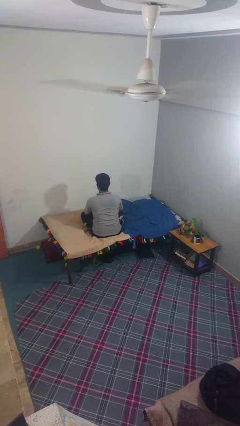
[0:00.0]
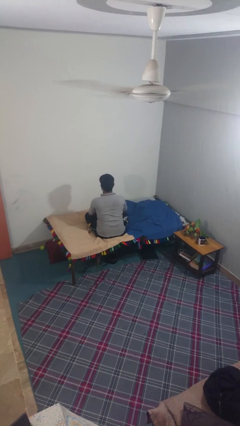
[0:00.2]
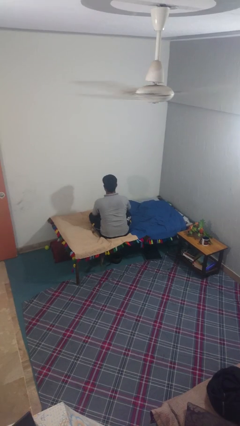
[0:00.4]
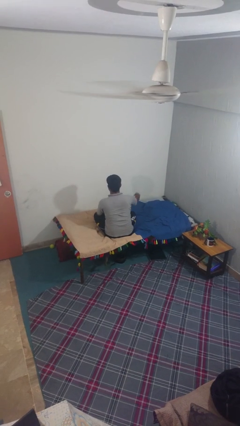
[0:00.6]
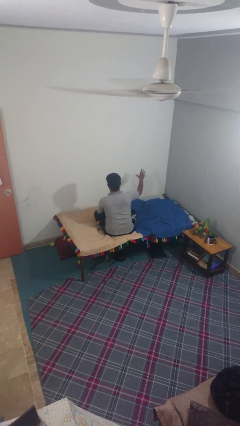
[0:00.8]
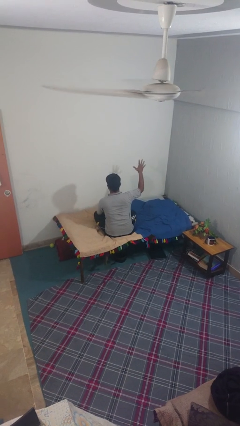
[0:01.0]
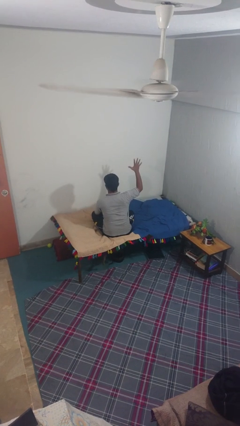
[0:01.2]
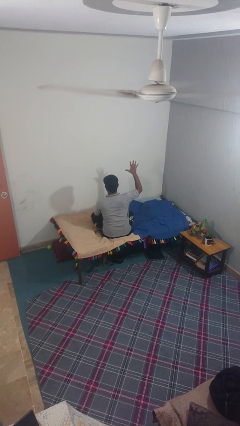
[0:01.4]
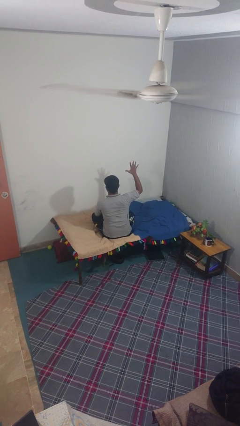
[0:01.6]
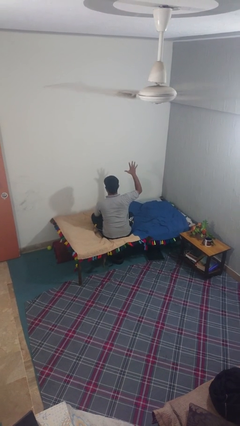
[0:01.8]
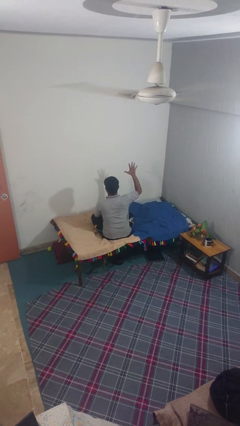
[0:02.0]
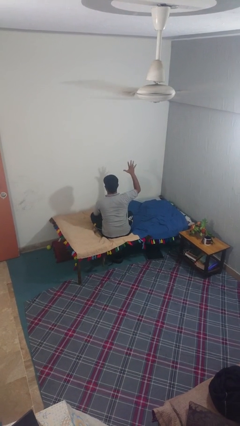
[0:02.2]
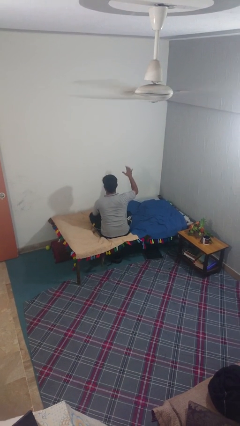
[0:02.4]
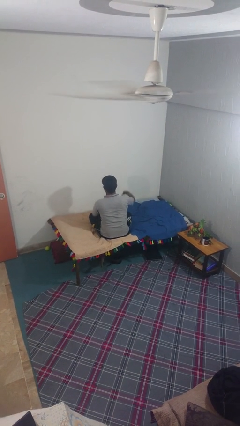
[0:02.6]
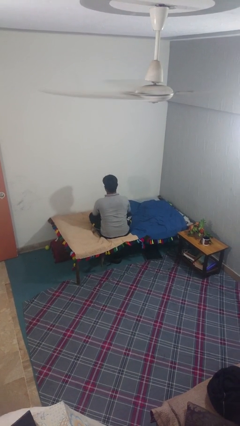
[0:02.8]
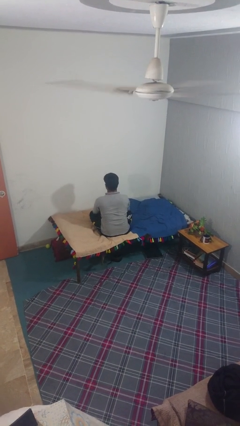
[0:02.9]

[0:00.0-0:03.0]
person gestures number five

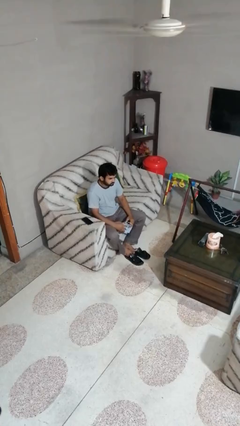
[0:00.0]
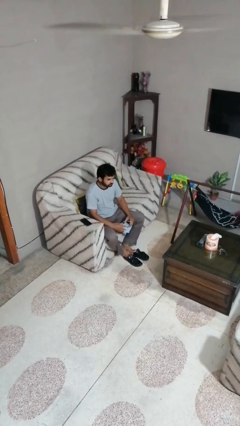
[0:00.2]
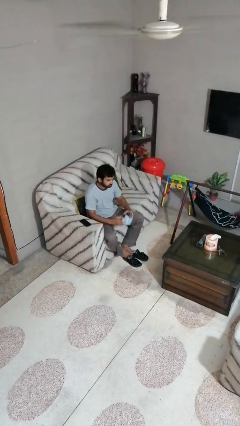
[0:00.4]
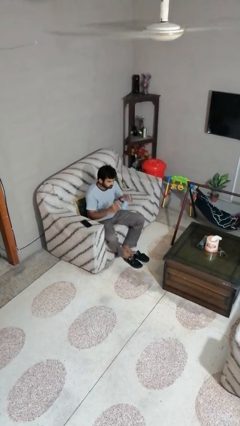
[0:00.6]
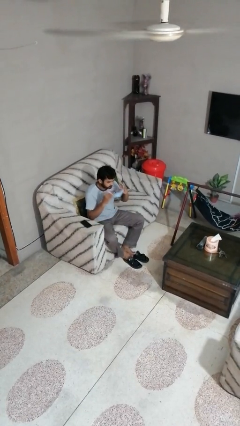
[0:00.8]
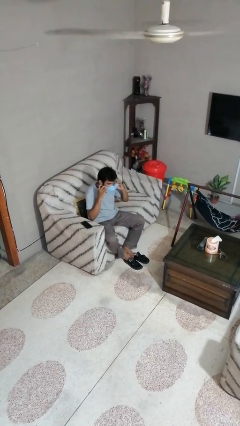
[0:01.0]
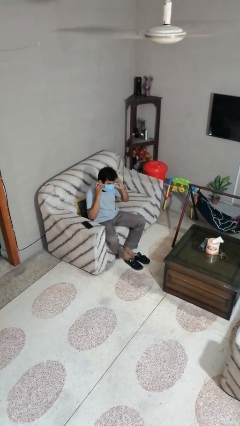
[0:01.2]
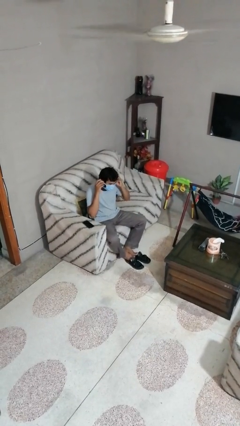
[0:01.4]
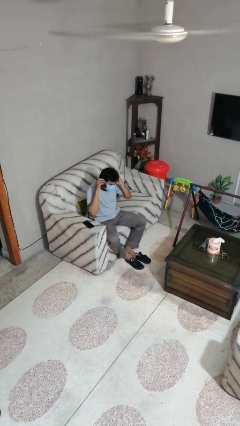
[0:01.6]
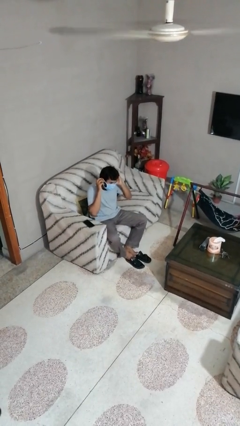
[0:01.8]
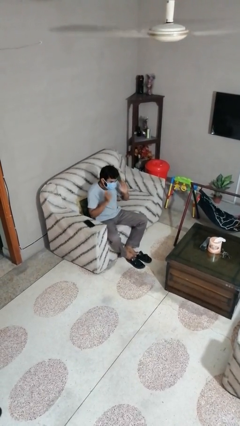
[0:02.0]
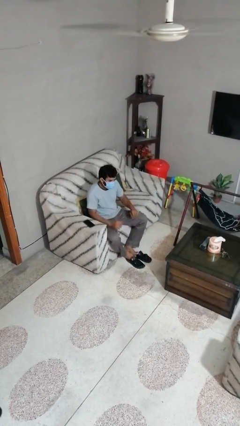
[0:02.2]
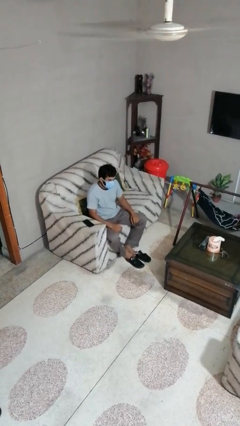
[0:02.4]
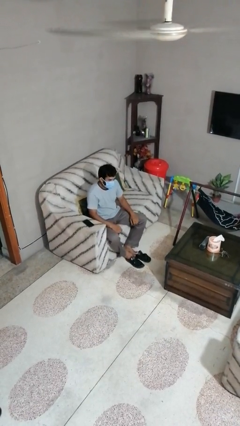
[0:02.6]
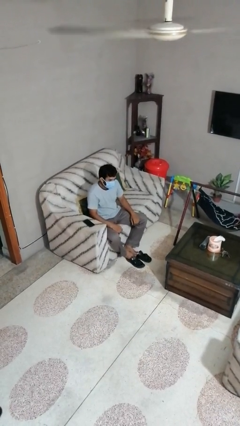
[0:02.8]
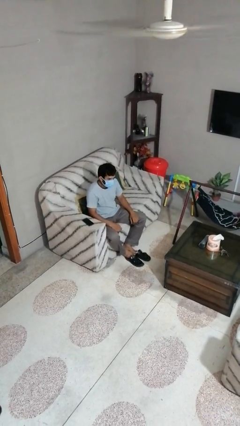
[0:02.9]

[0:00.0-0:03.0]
person puts on facemask

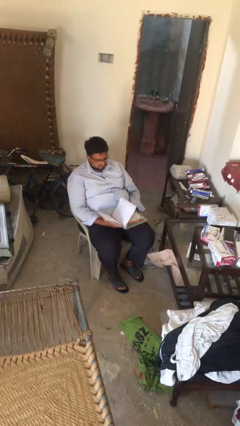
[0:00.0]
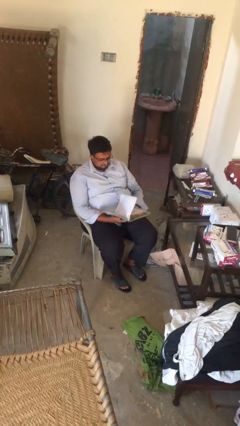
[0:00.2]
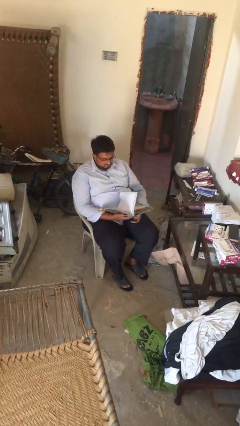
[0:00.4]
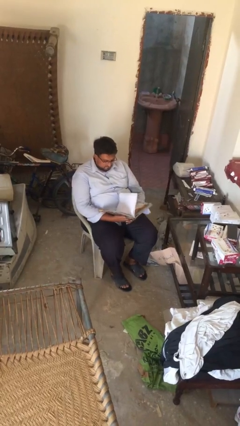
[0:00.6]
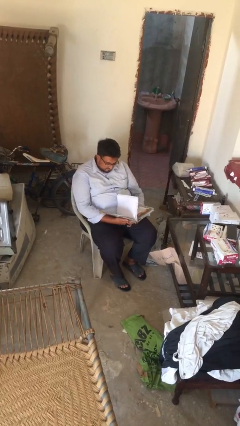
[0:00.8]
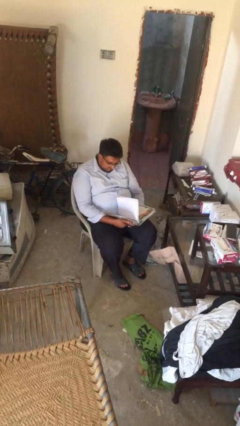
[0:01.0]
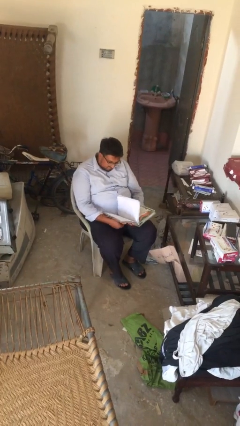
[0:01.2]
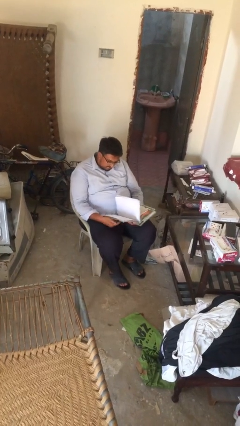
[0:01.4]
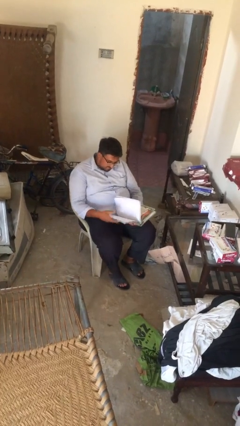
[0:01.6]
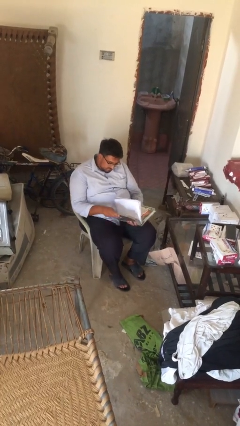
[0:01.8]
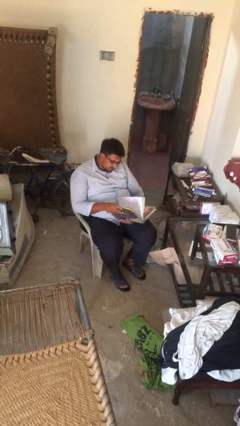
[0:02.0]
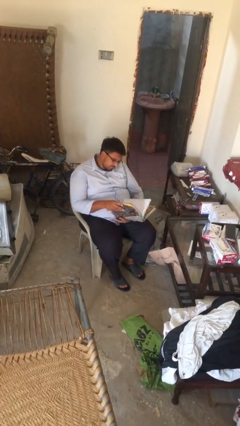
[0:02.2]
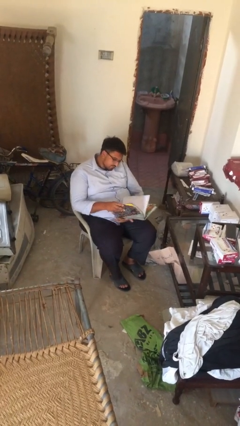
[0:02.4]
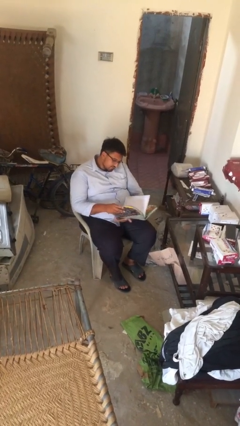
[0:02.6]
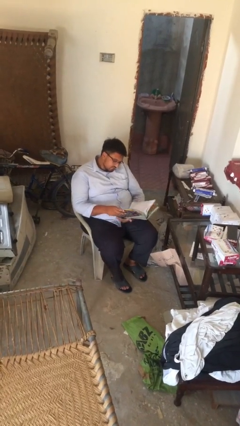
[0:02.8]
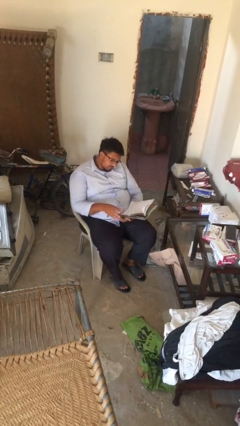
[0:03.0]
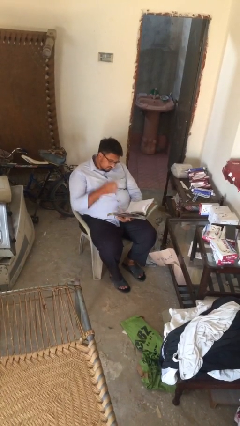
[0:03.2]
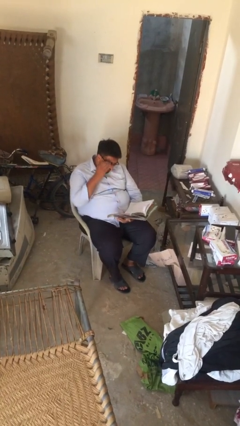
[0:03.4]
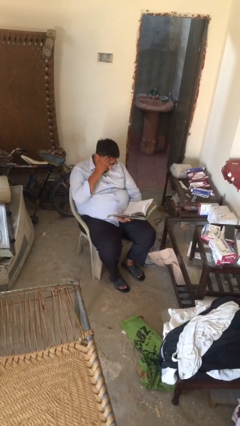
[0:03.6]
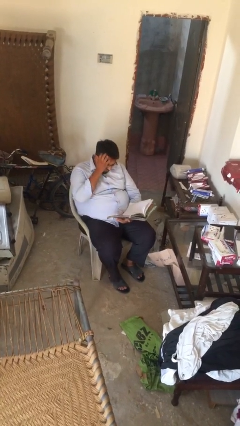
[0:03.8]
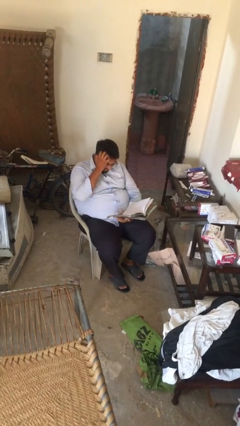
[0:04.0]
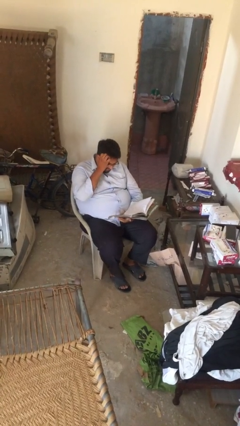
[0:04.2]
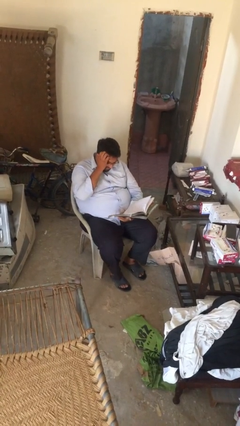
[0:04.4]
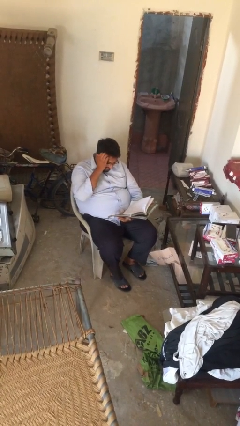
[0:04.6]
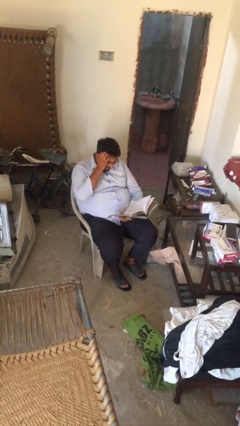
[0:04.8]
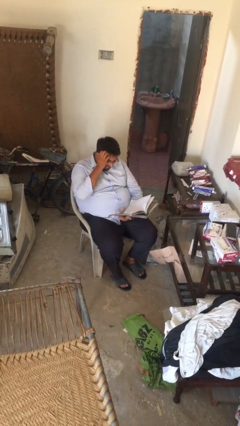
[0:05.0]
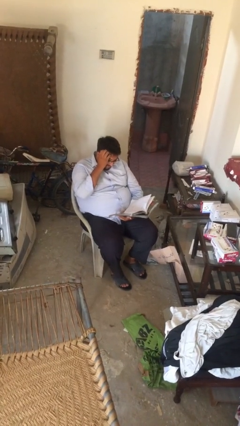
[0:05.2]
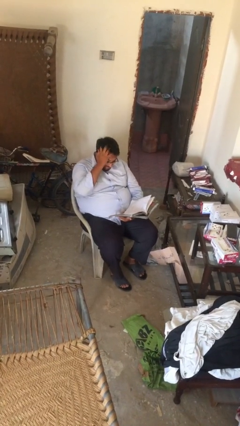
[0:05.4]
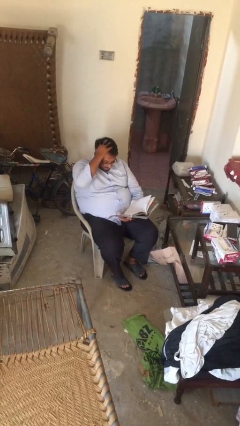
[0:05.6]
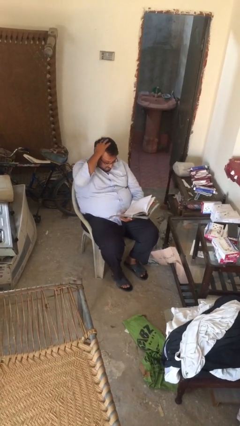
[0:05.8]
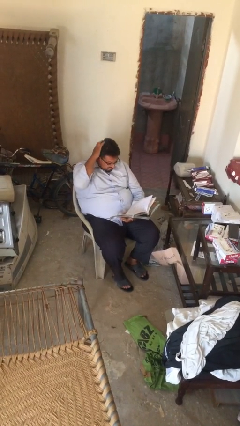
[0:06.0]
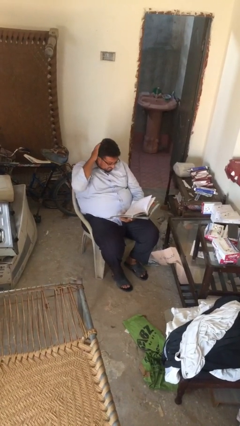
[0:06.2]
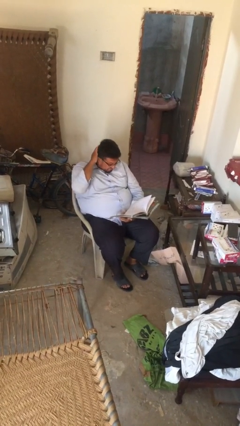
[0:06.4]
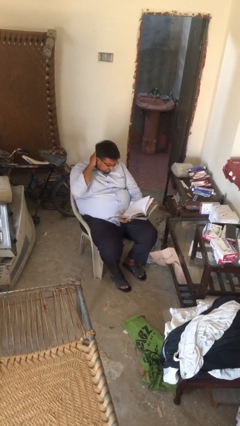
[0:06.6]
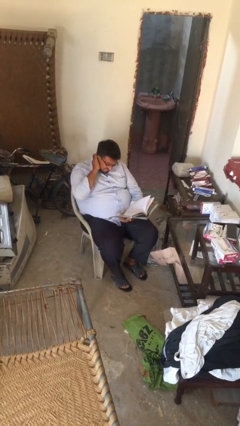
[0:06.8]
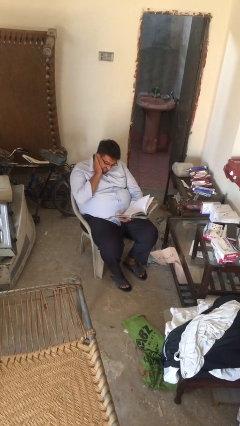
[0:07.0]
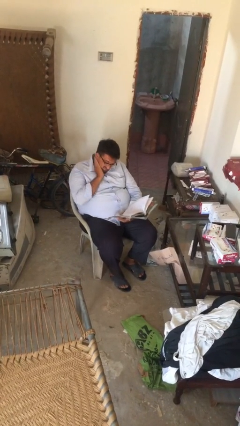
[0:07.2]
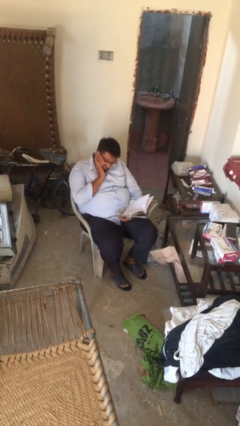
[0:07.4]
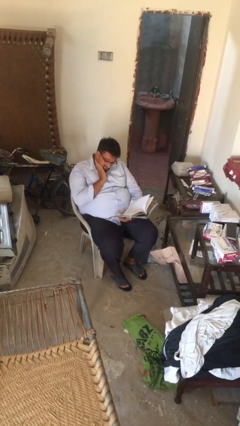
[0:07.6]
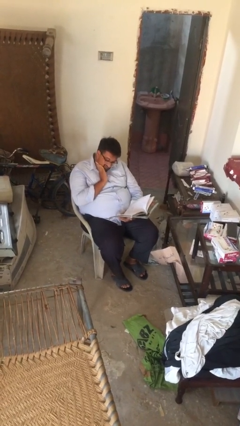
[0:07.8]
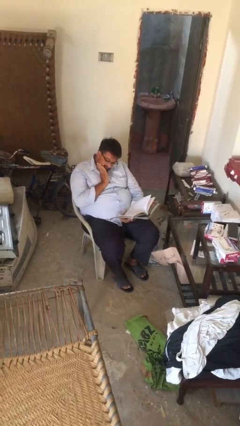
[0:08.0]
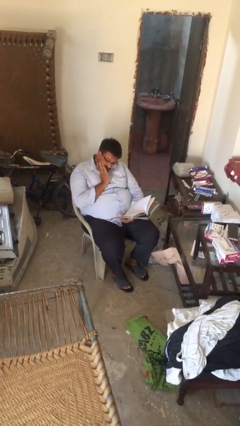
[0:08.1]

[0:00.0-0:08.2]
person reads document

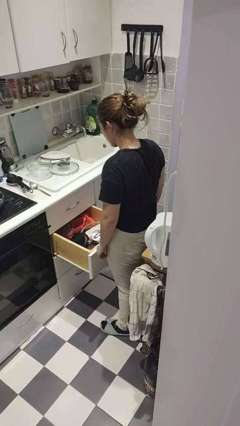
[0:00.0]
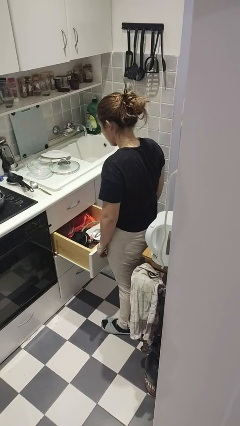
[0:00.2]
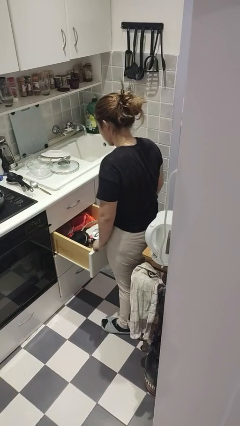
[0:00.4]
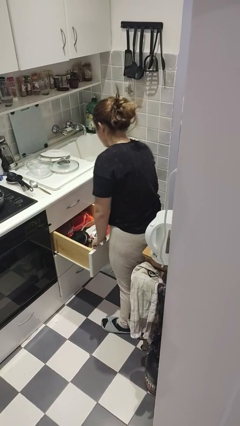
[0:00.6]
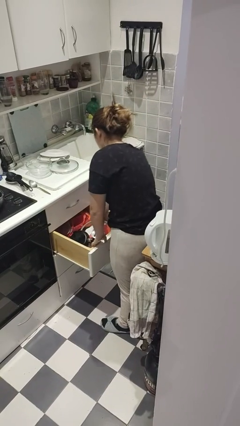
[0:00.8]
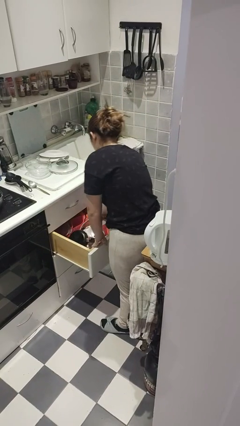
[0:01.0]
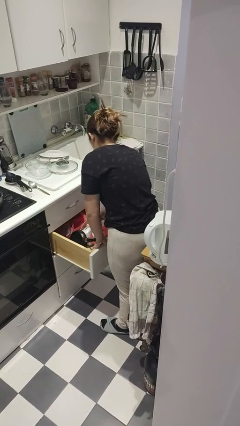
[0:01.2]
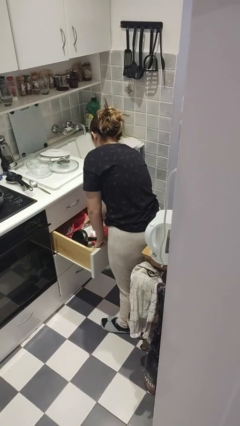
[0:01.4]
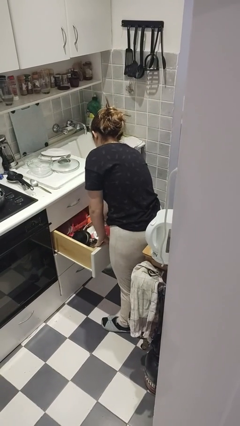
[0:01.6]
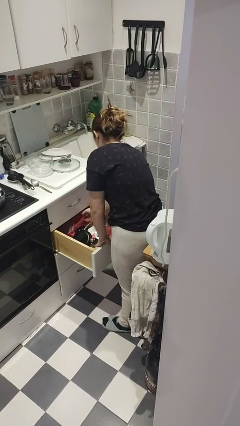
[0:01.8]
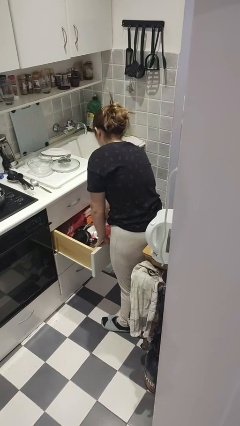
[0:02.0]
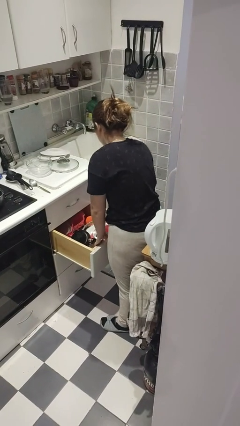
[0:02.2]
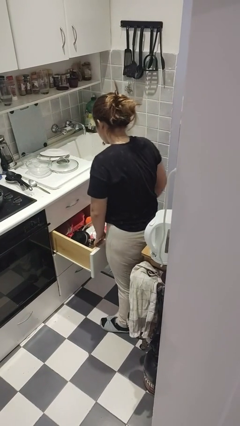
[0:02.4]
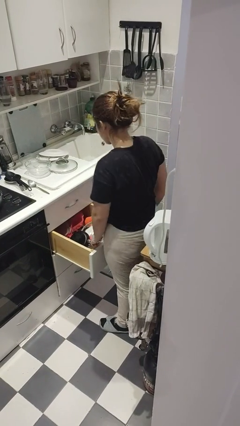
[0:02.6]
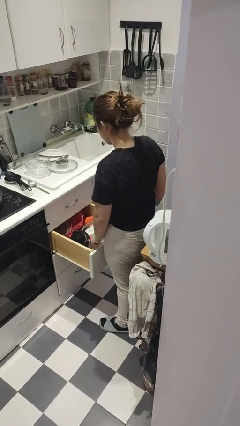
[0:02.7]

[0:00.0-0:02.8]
person searches in kitchen drawer

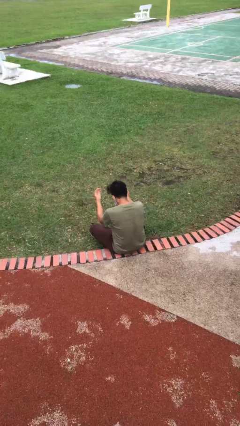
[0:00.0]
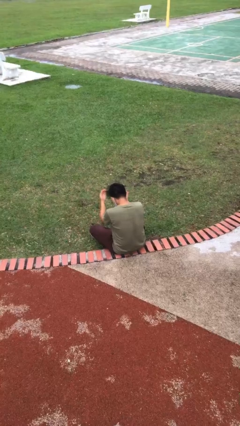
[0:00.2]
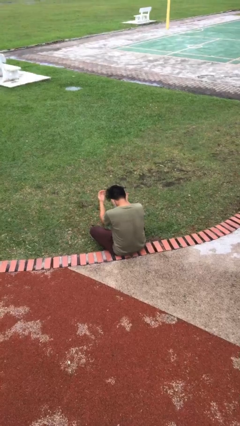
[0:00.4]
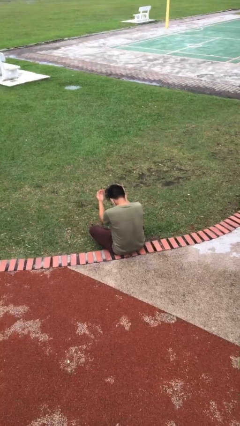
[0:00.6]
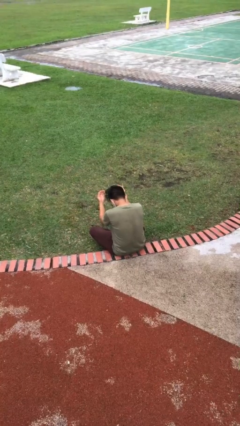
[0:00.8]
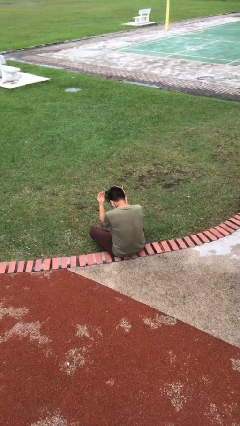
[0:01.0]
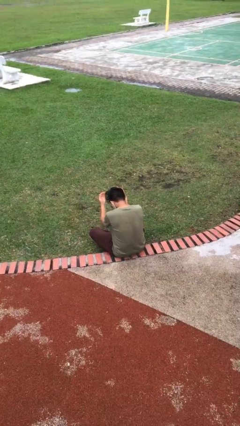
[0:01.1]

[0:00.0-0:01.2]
person prays
